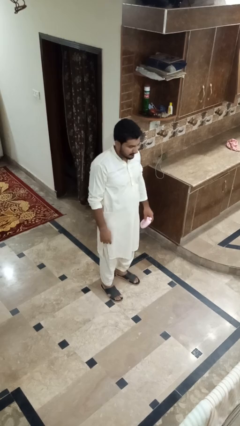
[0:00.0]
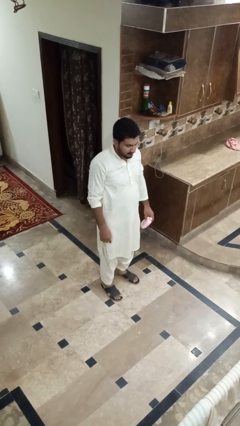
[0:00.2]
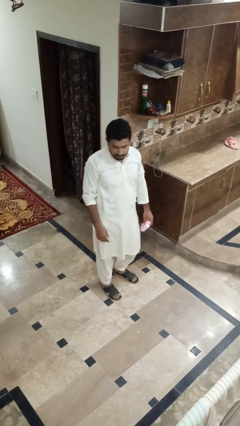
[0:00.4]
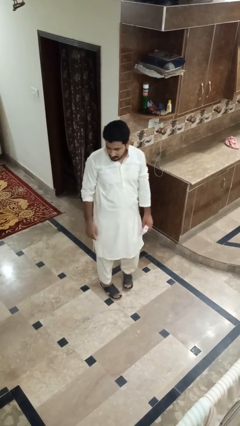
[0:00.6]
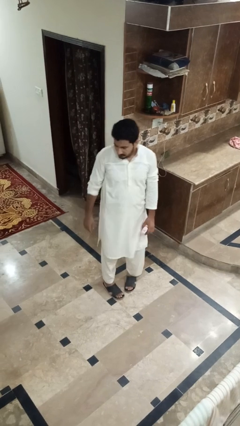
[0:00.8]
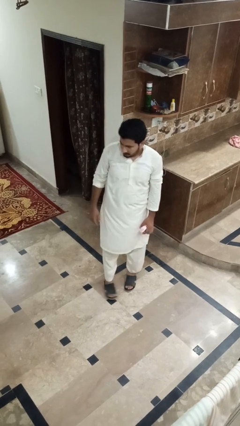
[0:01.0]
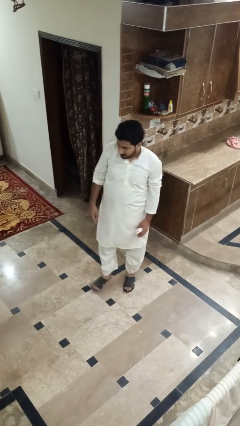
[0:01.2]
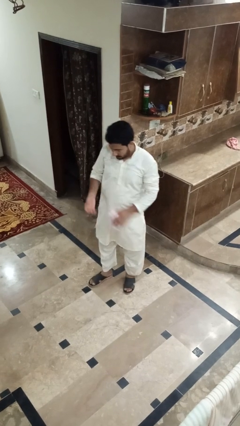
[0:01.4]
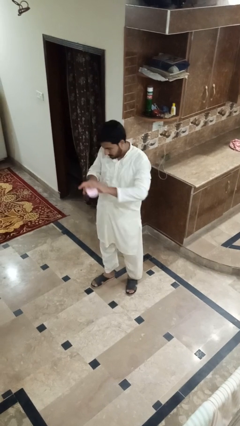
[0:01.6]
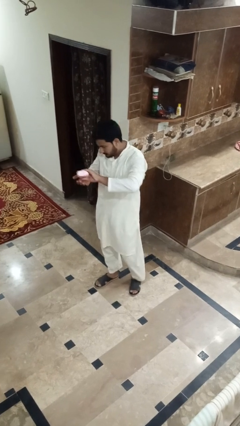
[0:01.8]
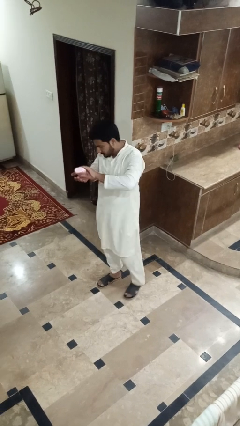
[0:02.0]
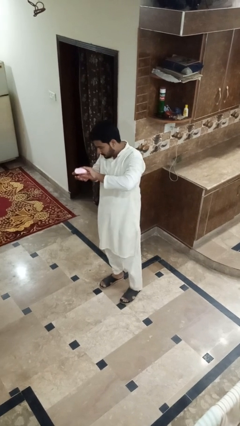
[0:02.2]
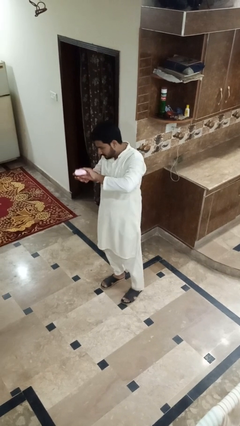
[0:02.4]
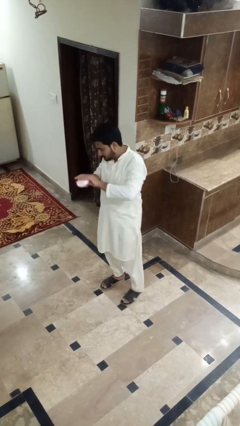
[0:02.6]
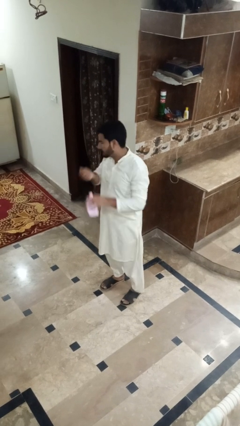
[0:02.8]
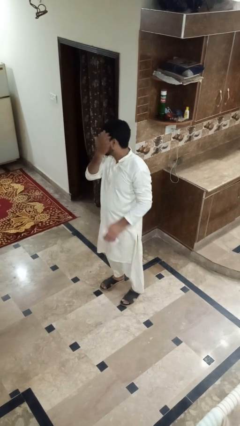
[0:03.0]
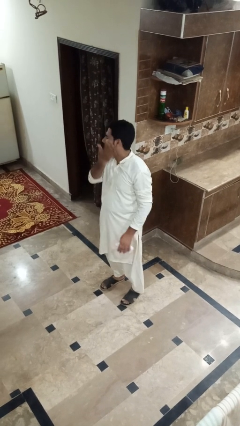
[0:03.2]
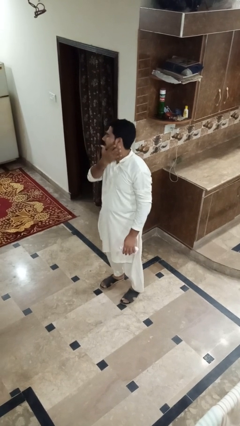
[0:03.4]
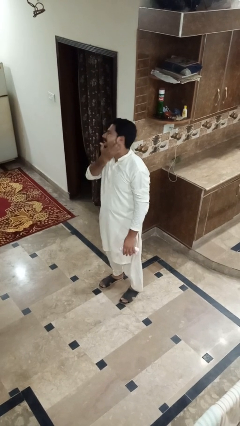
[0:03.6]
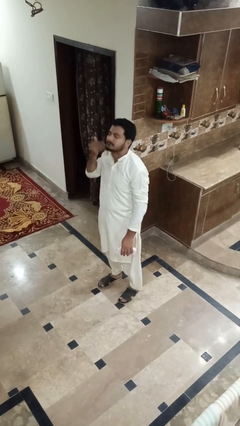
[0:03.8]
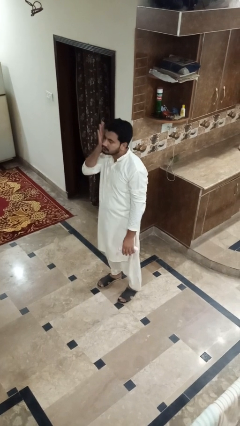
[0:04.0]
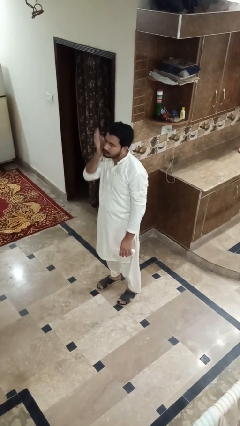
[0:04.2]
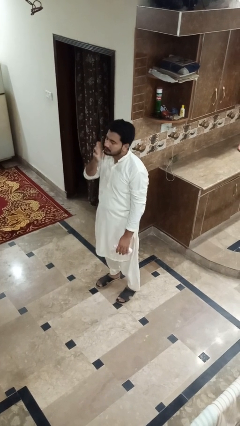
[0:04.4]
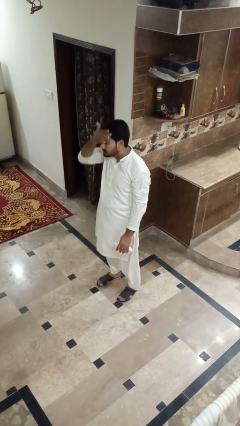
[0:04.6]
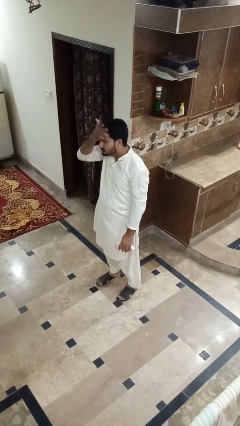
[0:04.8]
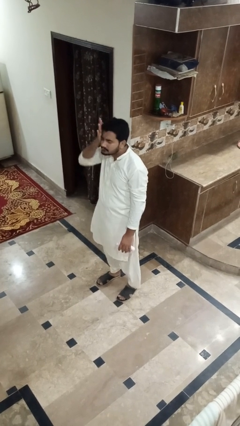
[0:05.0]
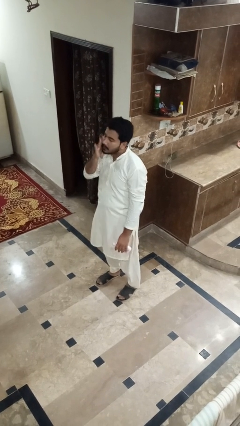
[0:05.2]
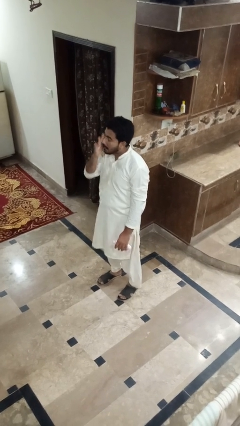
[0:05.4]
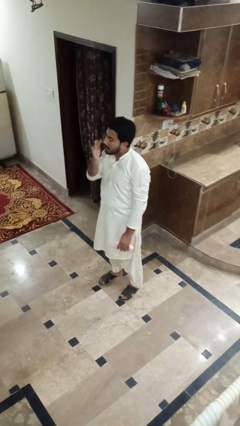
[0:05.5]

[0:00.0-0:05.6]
person applies facial moisturizer

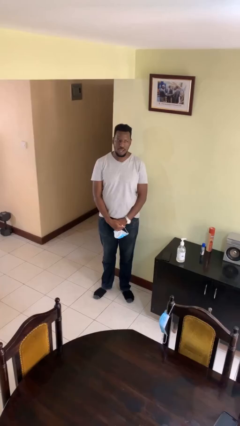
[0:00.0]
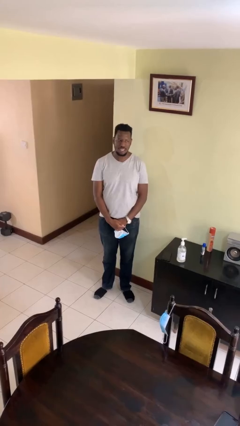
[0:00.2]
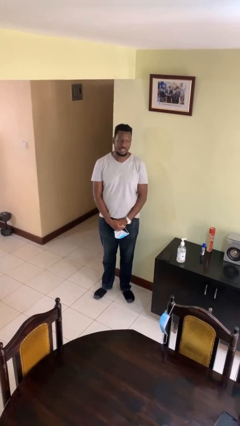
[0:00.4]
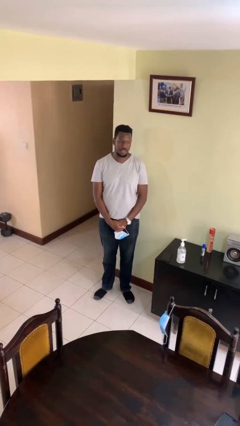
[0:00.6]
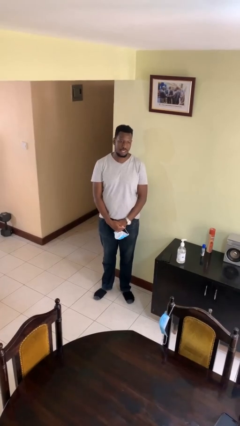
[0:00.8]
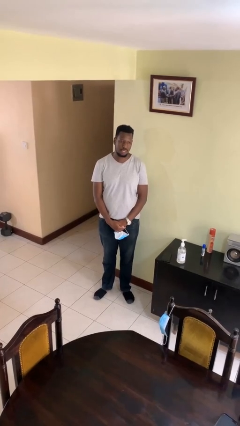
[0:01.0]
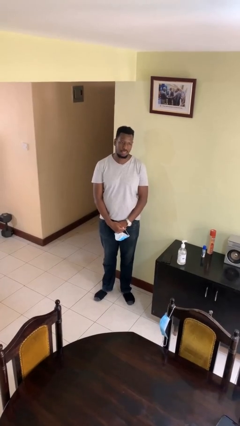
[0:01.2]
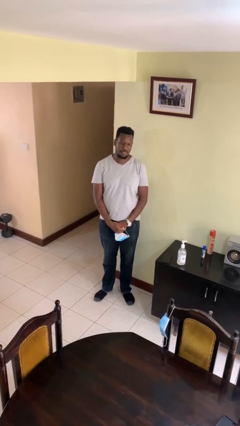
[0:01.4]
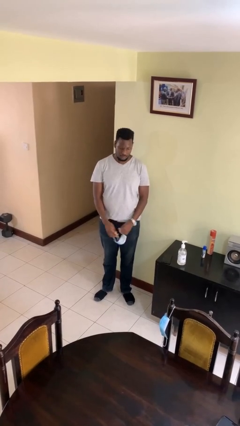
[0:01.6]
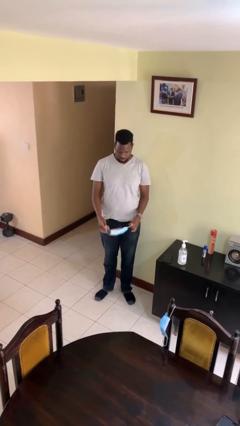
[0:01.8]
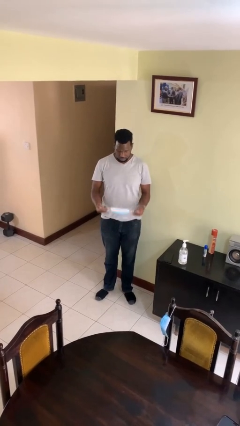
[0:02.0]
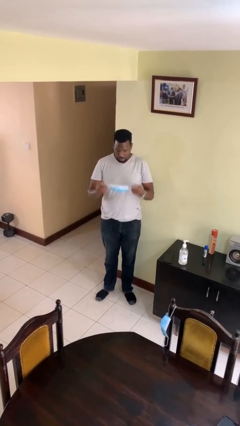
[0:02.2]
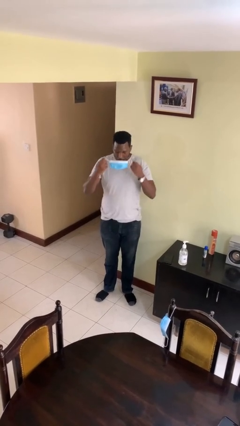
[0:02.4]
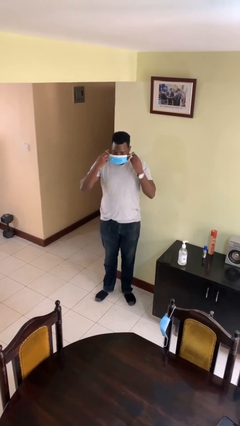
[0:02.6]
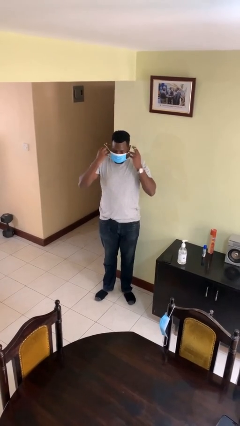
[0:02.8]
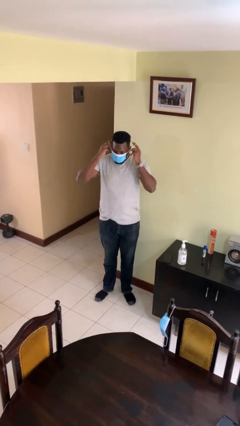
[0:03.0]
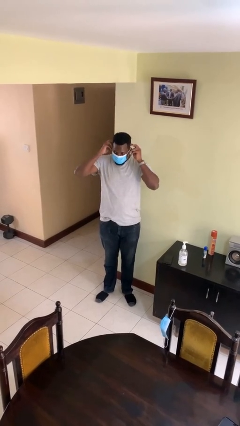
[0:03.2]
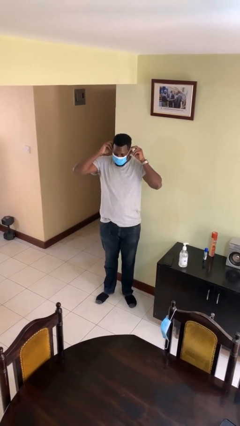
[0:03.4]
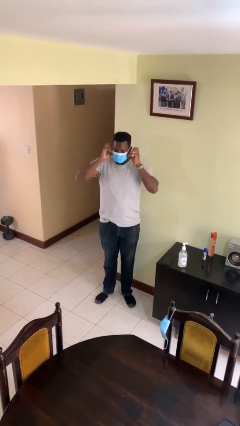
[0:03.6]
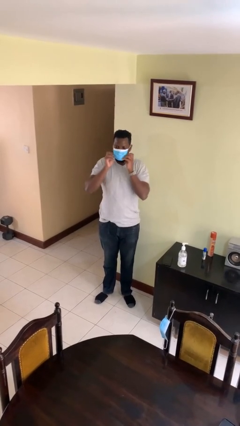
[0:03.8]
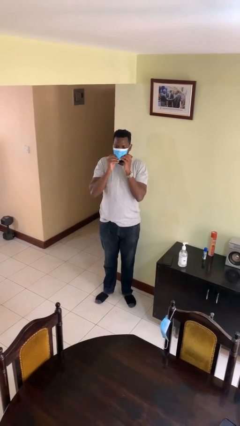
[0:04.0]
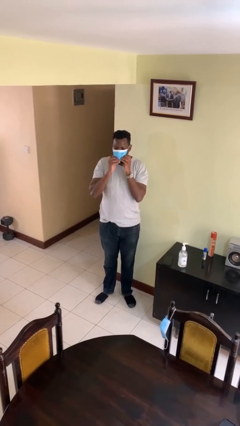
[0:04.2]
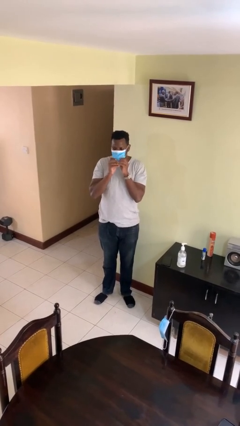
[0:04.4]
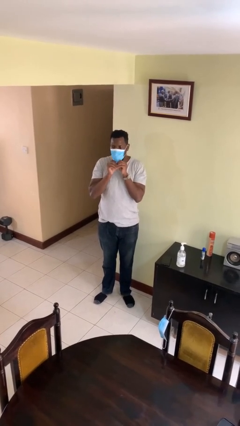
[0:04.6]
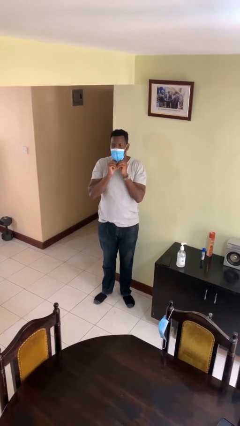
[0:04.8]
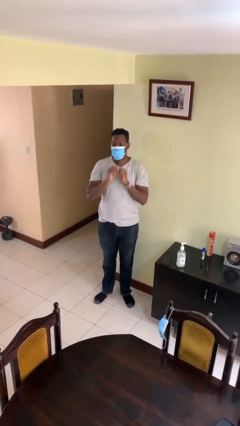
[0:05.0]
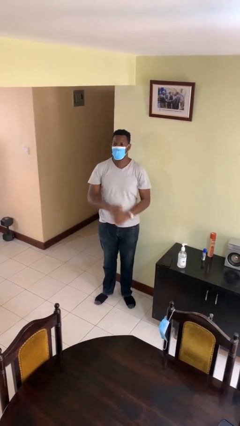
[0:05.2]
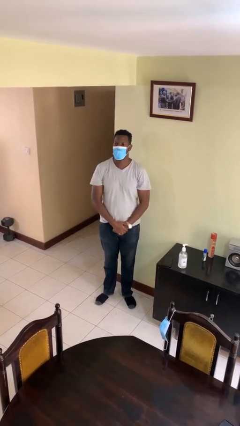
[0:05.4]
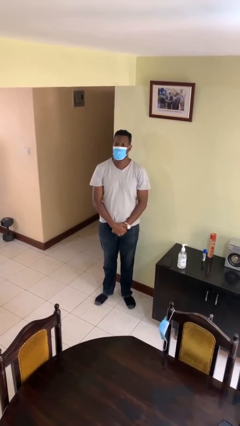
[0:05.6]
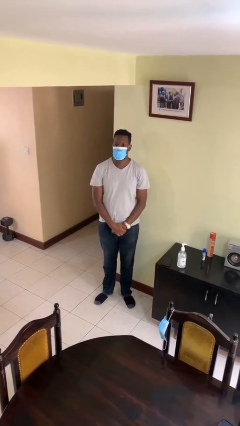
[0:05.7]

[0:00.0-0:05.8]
person puts on facemask

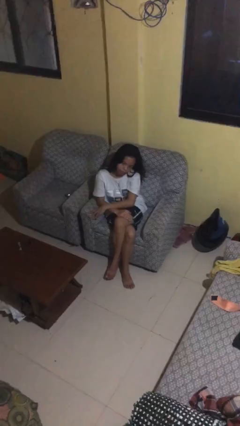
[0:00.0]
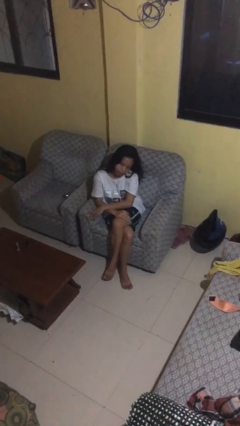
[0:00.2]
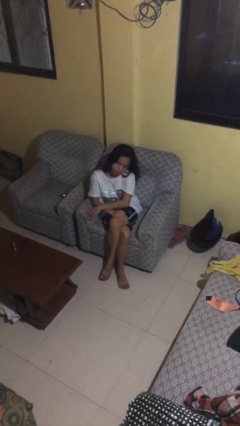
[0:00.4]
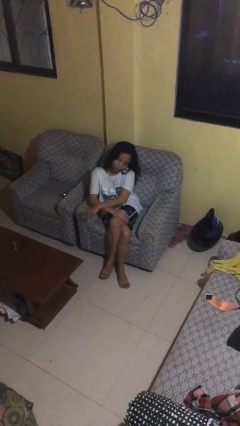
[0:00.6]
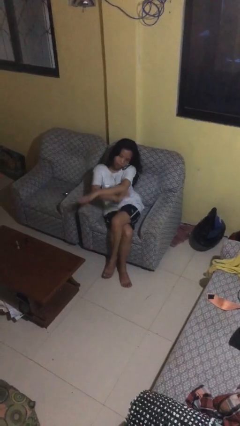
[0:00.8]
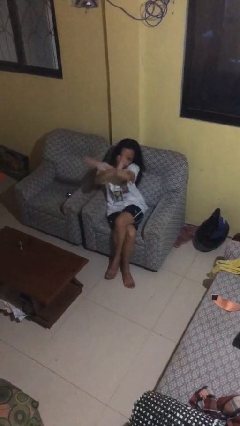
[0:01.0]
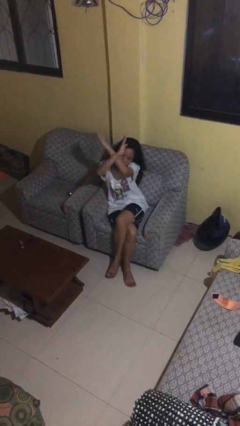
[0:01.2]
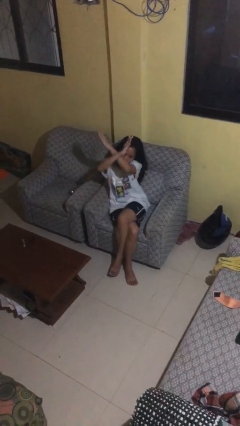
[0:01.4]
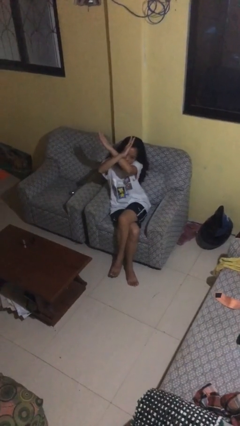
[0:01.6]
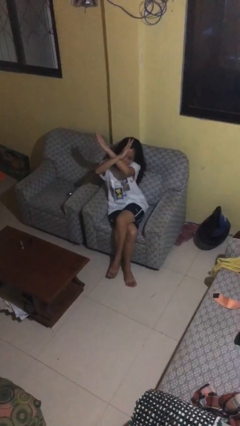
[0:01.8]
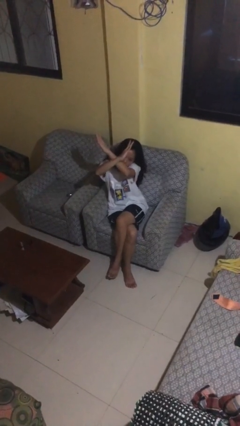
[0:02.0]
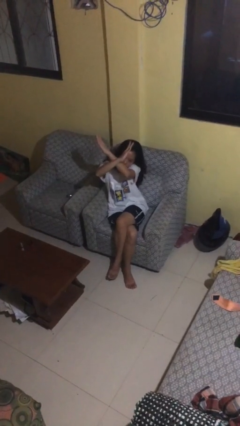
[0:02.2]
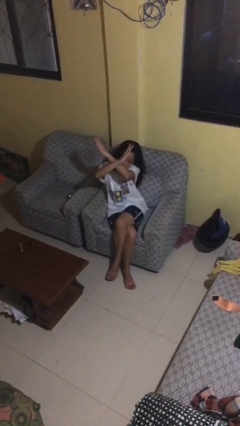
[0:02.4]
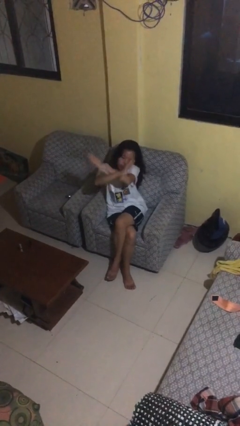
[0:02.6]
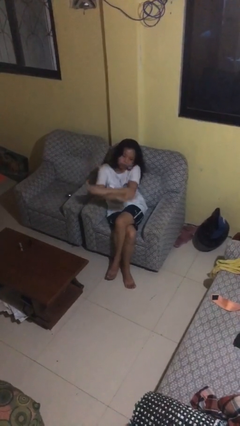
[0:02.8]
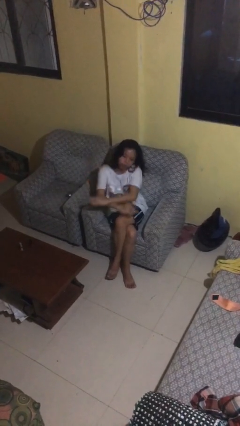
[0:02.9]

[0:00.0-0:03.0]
person gestures arms x

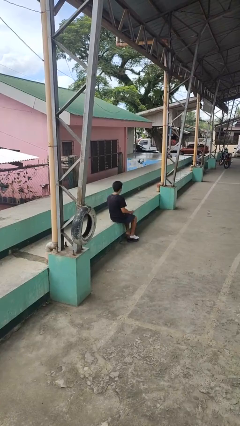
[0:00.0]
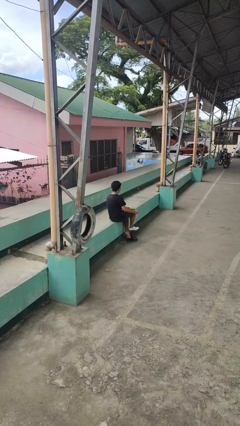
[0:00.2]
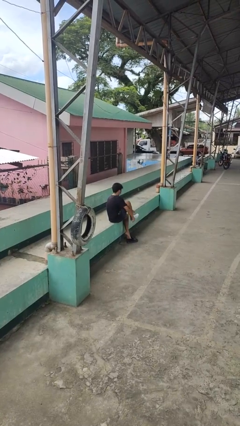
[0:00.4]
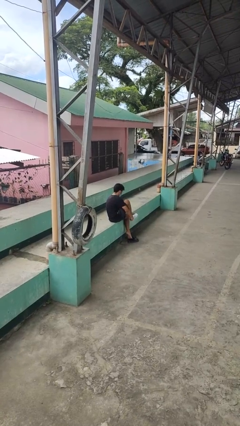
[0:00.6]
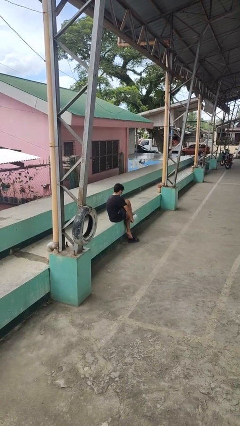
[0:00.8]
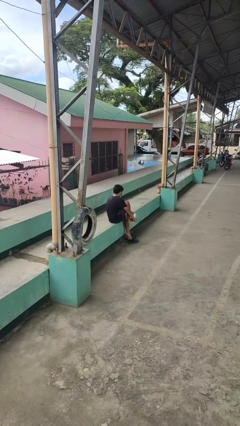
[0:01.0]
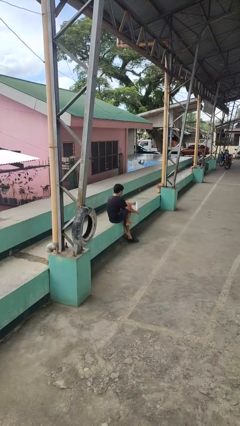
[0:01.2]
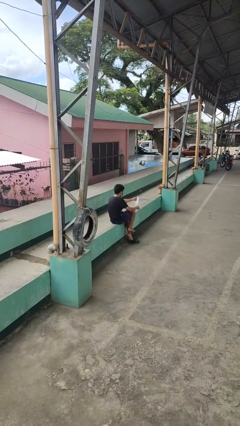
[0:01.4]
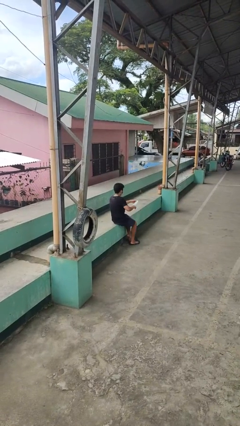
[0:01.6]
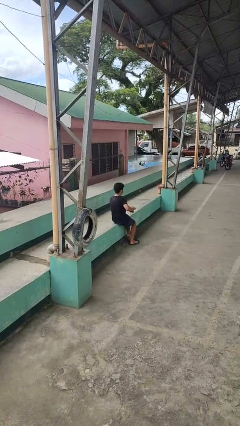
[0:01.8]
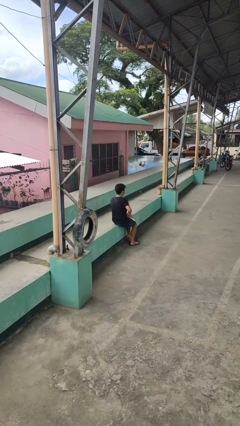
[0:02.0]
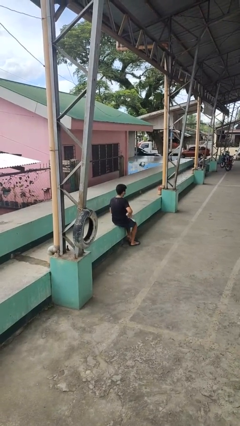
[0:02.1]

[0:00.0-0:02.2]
person takes off socks

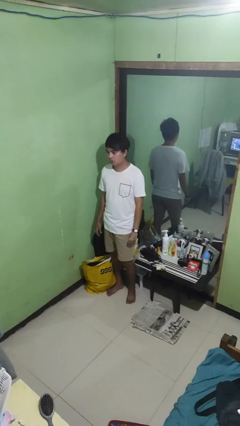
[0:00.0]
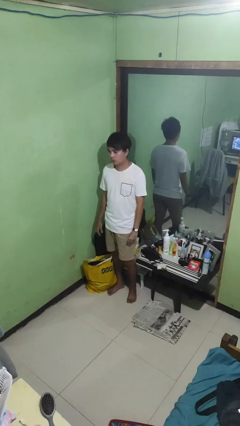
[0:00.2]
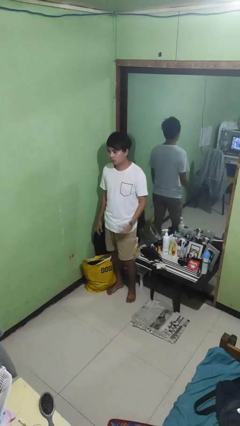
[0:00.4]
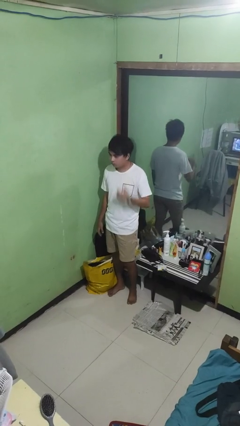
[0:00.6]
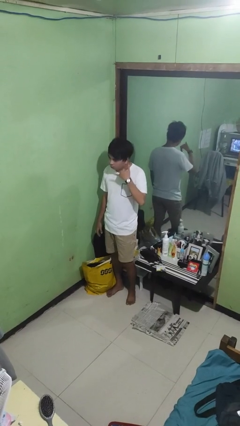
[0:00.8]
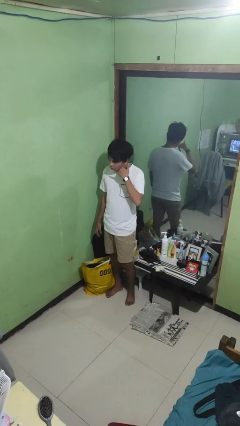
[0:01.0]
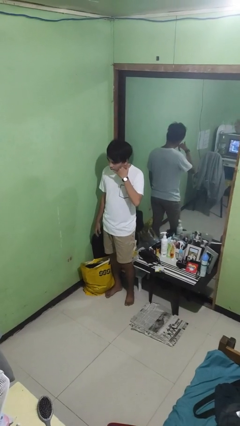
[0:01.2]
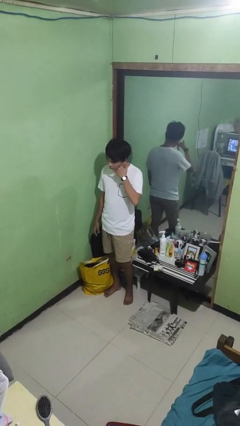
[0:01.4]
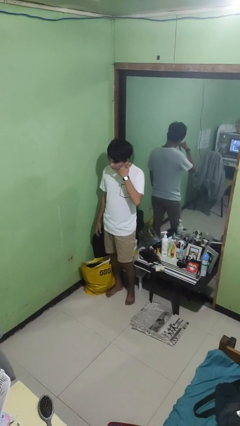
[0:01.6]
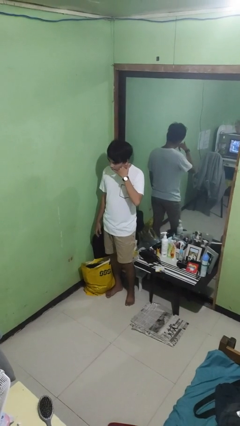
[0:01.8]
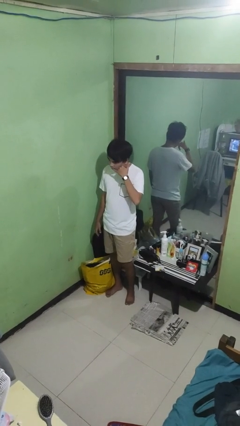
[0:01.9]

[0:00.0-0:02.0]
person gestures call me
